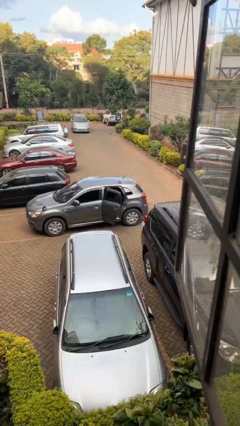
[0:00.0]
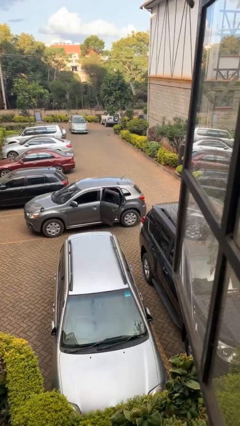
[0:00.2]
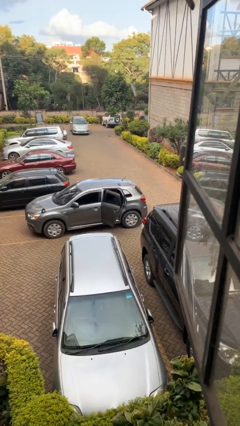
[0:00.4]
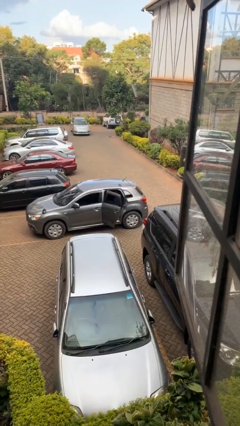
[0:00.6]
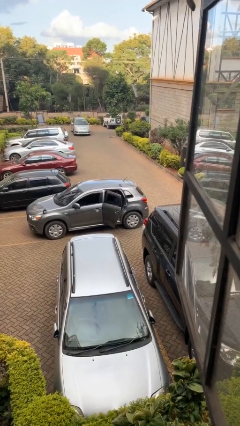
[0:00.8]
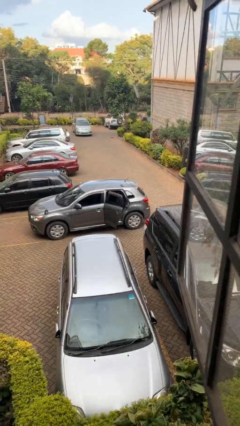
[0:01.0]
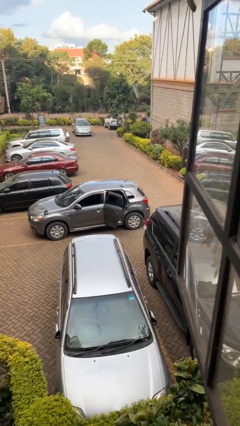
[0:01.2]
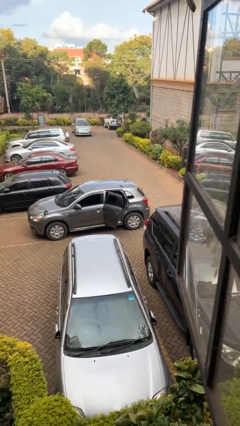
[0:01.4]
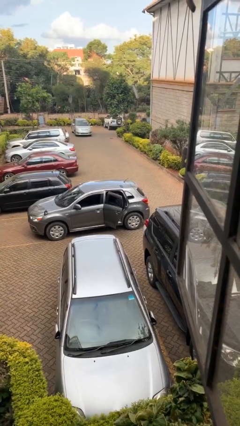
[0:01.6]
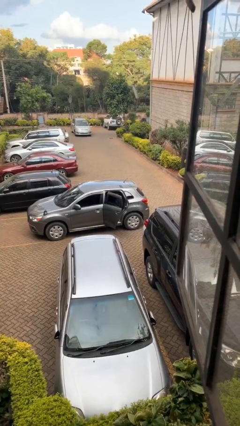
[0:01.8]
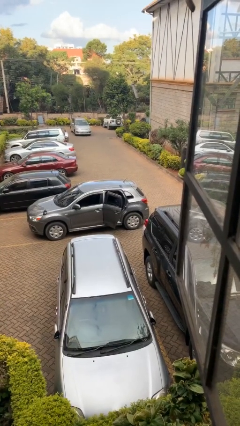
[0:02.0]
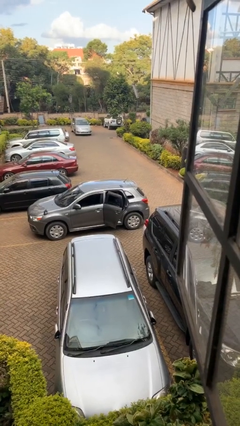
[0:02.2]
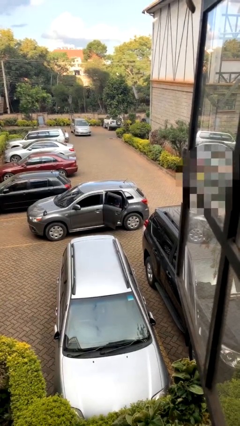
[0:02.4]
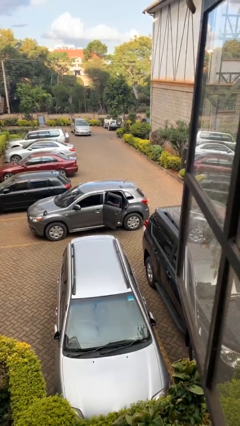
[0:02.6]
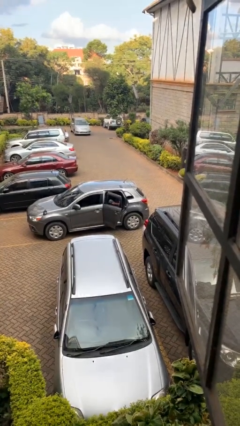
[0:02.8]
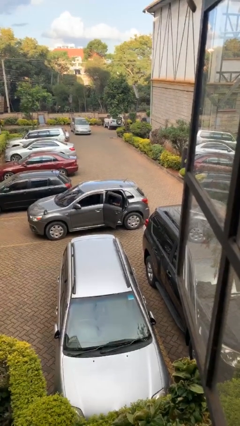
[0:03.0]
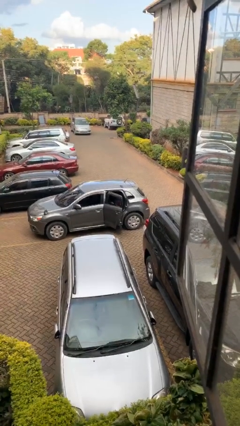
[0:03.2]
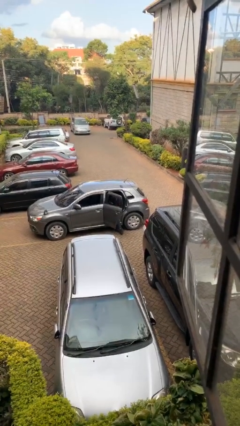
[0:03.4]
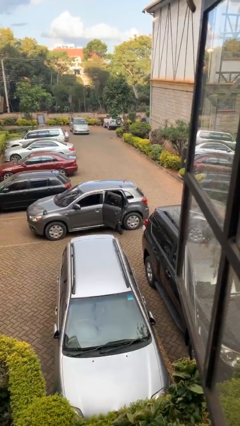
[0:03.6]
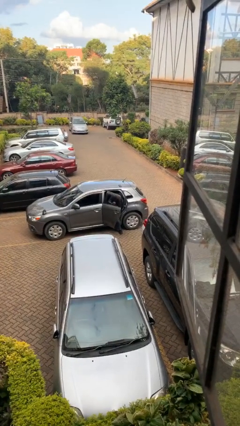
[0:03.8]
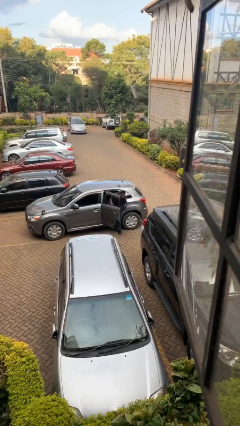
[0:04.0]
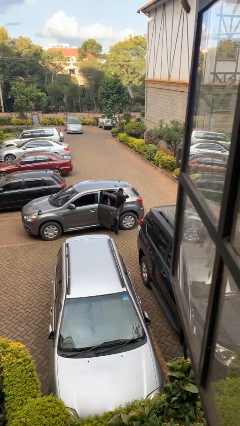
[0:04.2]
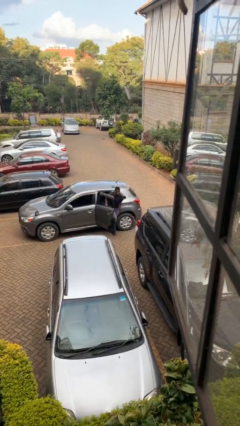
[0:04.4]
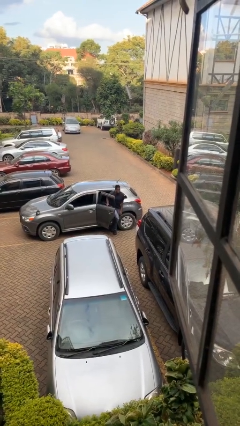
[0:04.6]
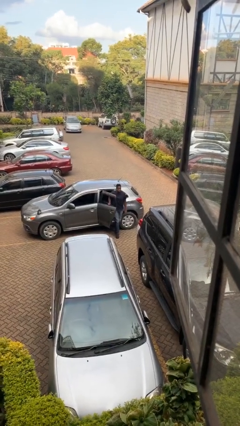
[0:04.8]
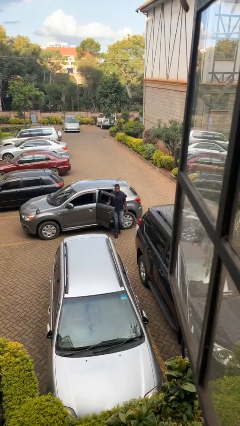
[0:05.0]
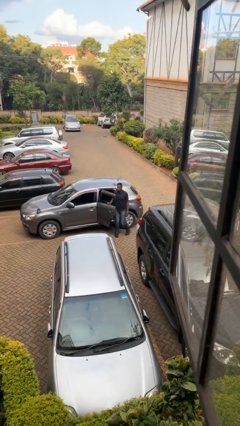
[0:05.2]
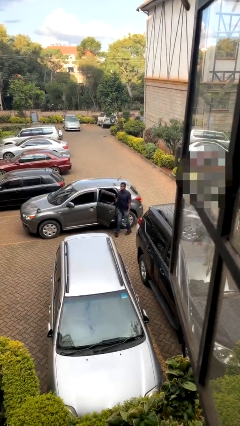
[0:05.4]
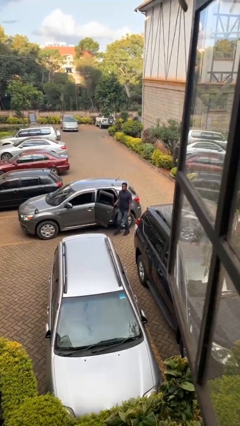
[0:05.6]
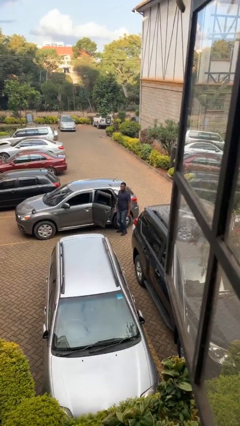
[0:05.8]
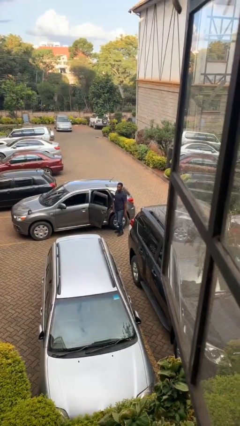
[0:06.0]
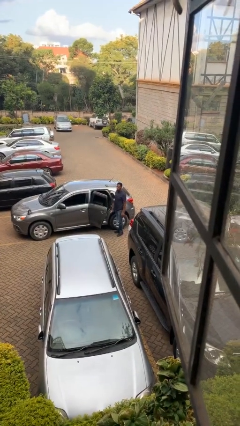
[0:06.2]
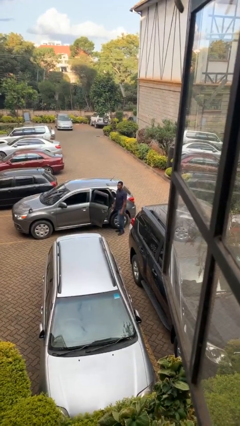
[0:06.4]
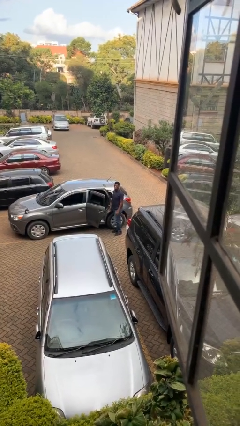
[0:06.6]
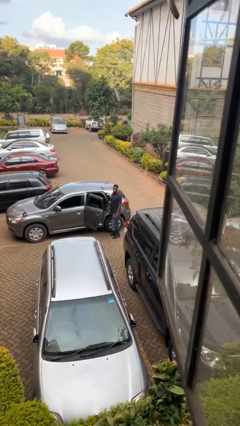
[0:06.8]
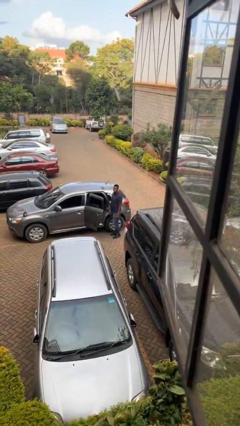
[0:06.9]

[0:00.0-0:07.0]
person exits car

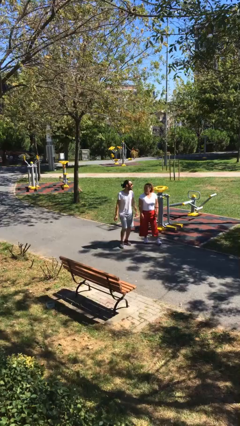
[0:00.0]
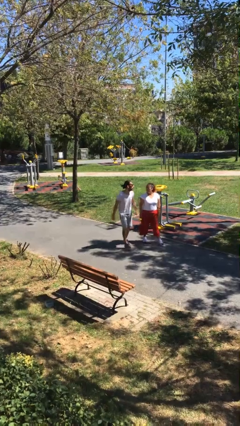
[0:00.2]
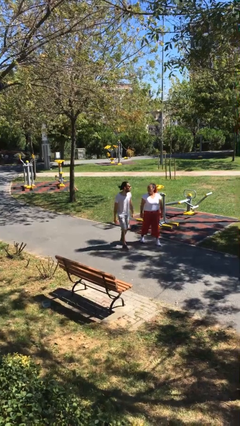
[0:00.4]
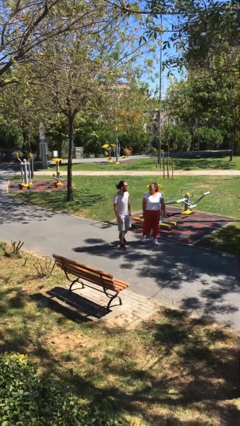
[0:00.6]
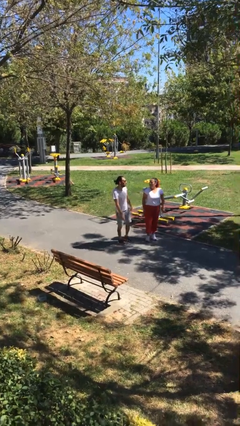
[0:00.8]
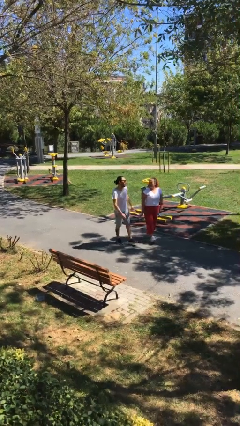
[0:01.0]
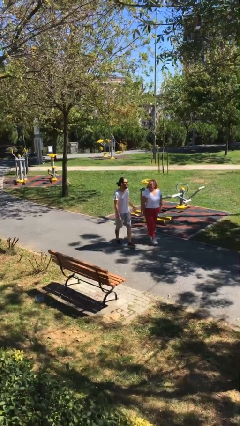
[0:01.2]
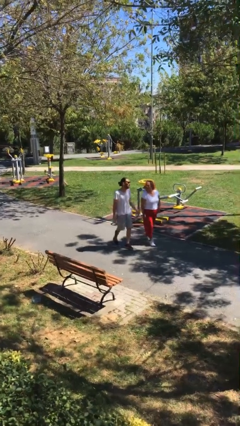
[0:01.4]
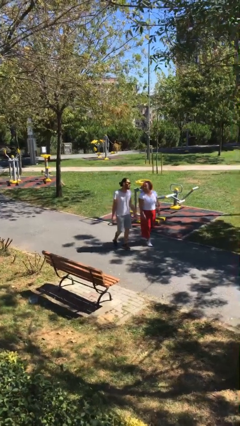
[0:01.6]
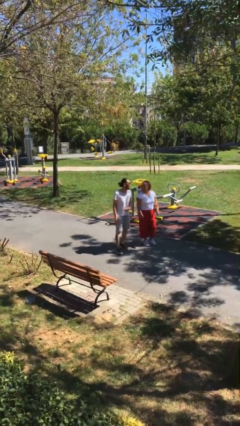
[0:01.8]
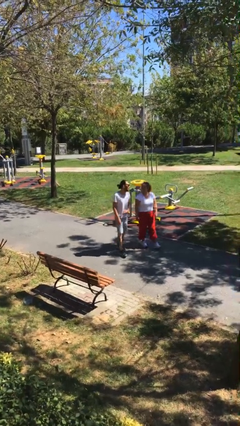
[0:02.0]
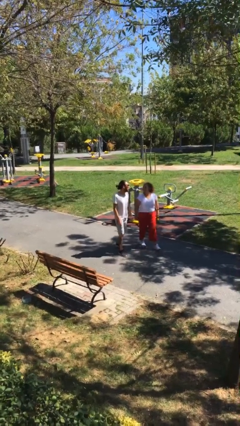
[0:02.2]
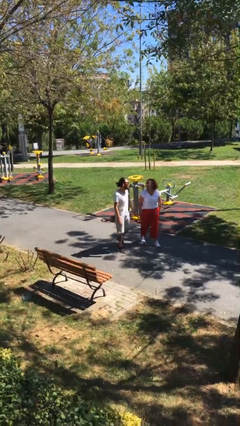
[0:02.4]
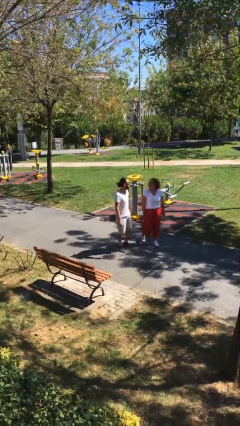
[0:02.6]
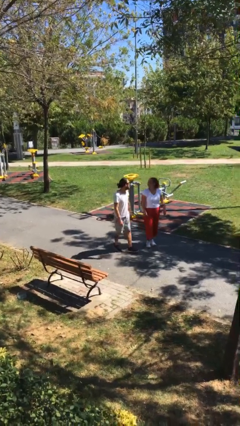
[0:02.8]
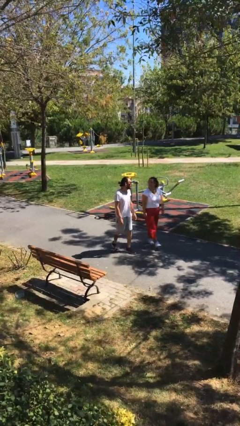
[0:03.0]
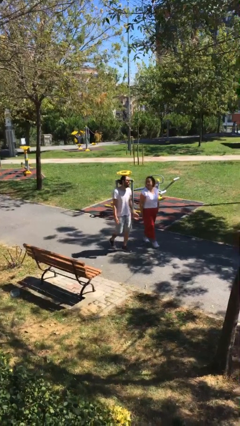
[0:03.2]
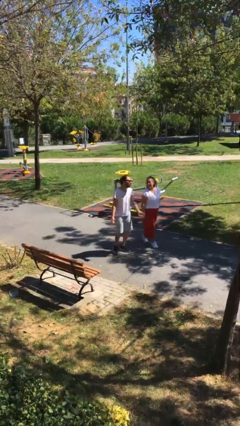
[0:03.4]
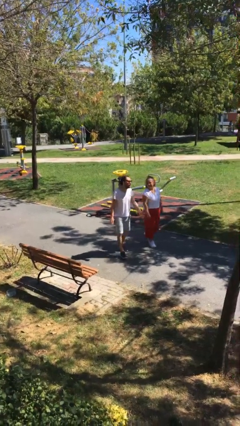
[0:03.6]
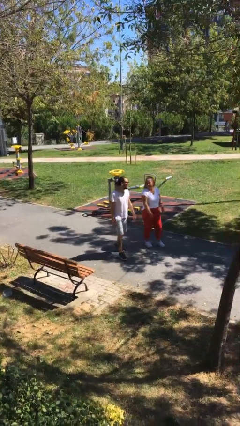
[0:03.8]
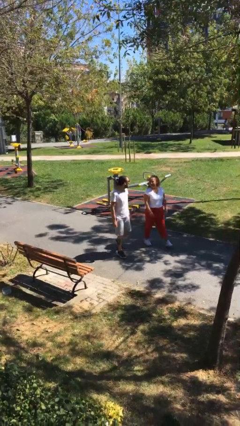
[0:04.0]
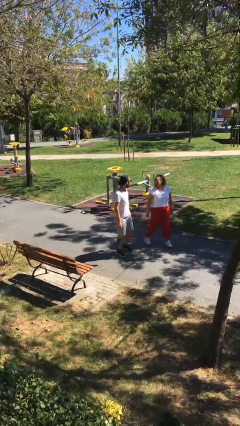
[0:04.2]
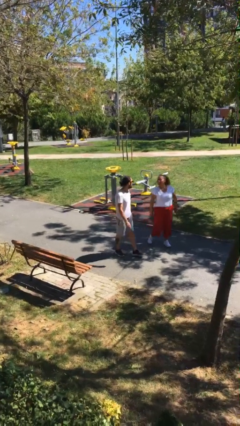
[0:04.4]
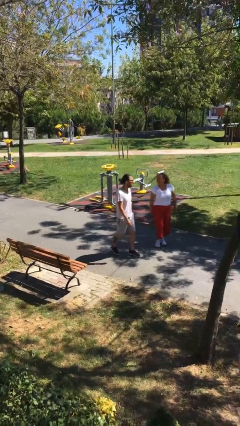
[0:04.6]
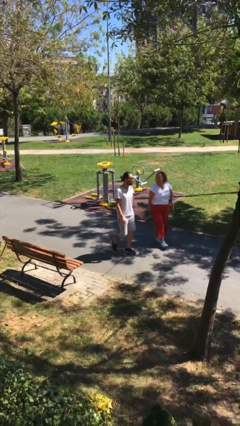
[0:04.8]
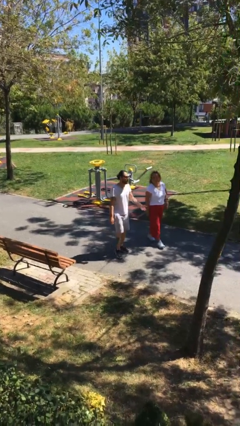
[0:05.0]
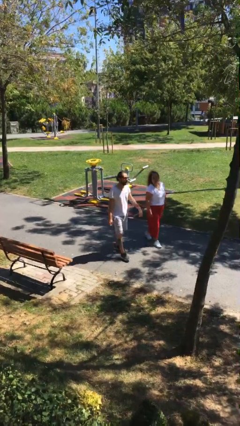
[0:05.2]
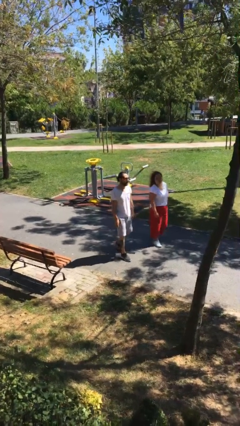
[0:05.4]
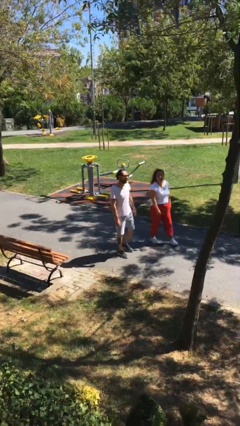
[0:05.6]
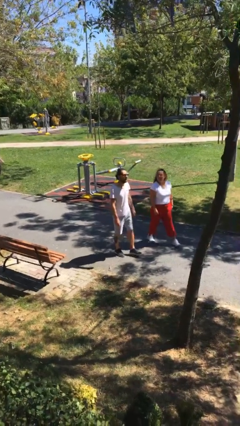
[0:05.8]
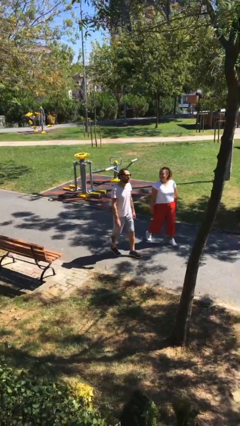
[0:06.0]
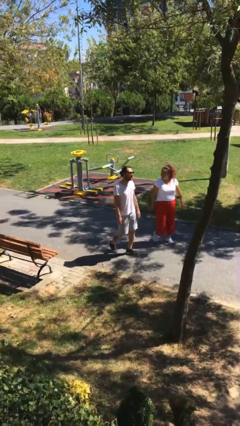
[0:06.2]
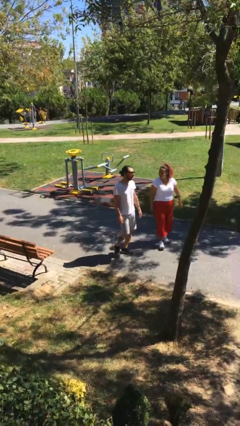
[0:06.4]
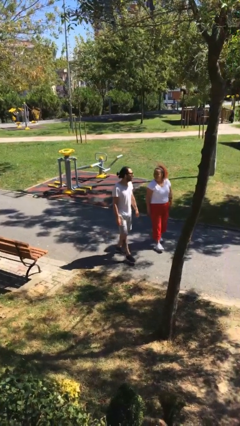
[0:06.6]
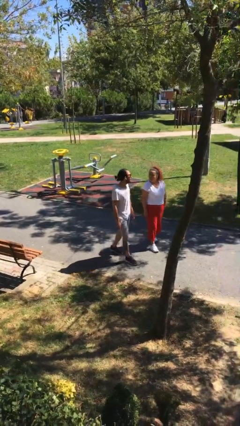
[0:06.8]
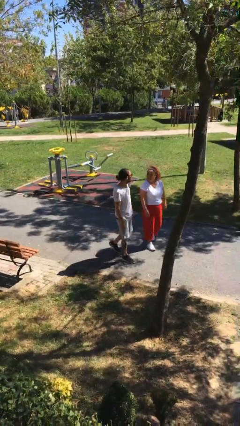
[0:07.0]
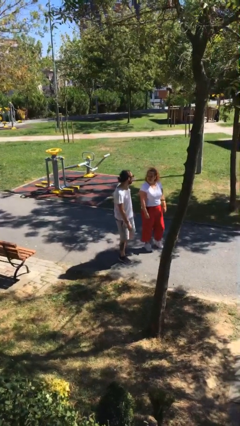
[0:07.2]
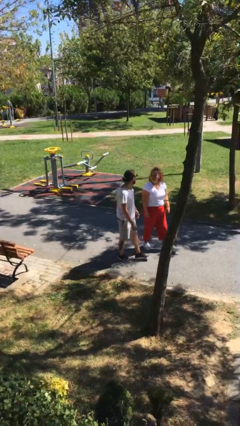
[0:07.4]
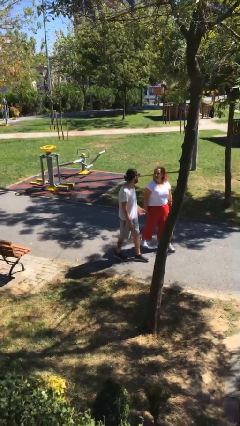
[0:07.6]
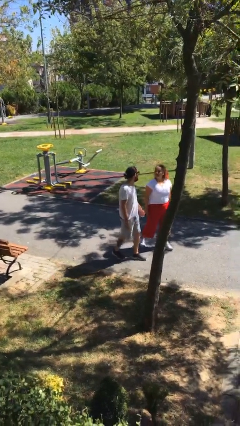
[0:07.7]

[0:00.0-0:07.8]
person talks to person

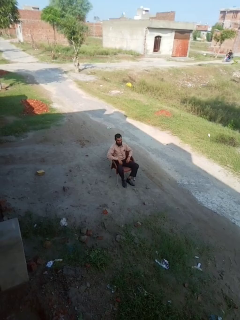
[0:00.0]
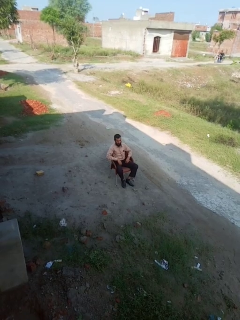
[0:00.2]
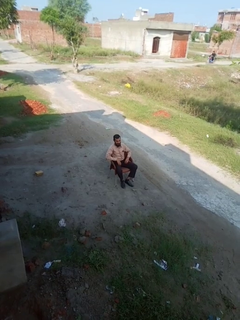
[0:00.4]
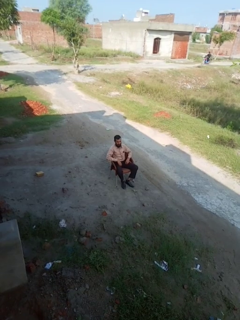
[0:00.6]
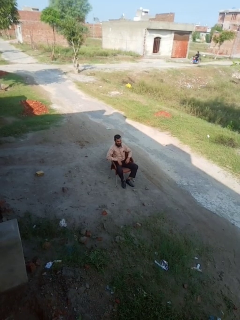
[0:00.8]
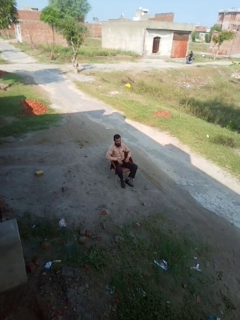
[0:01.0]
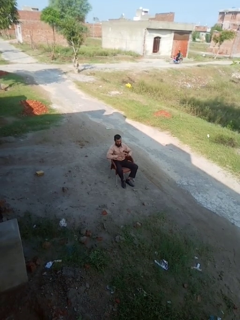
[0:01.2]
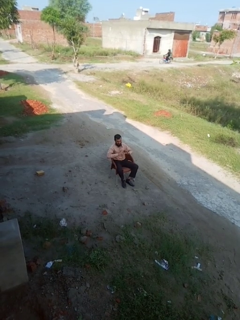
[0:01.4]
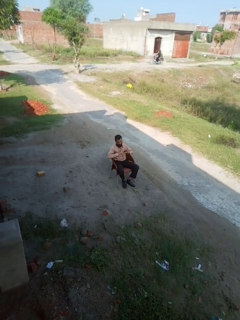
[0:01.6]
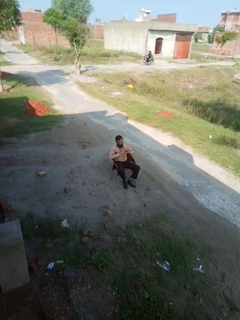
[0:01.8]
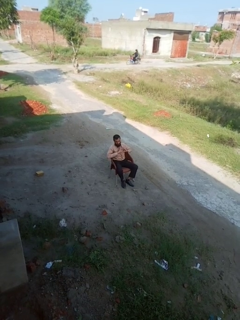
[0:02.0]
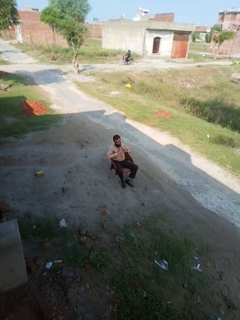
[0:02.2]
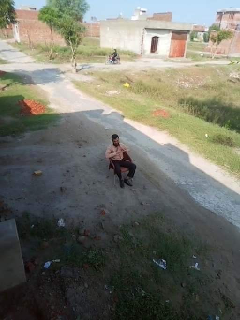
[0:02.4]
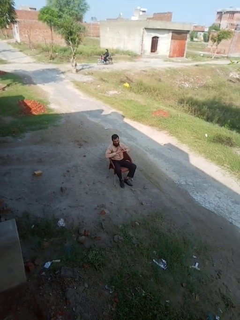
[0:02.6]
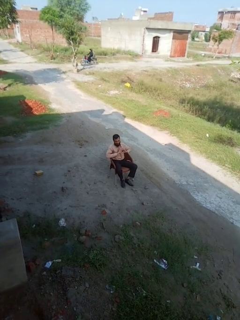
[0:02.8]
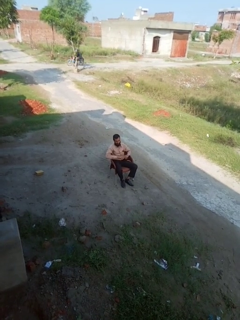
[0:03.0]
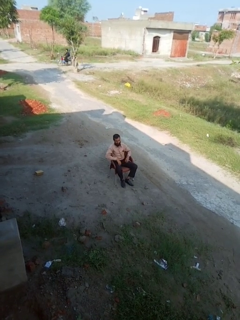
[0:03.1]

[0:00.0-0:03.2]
person gestures heart

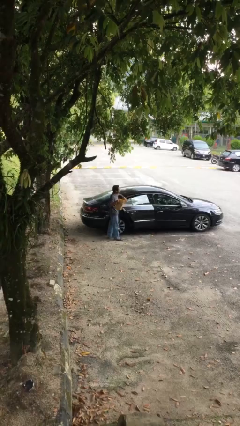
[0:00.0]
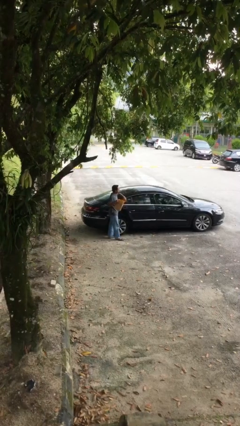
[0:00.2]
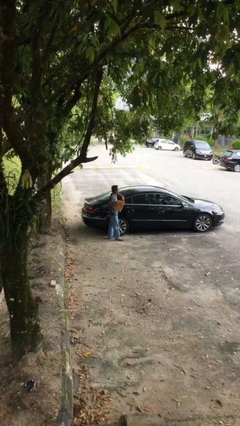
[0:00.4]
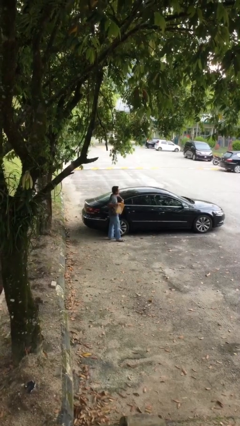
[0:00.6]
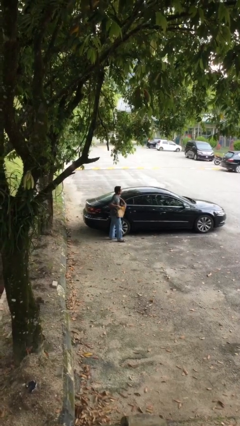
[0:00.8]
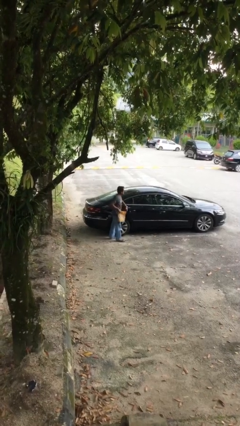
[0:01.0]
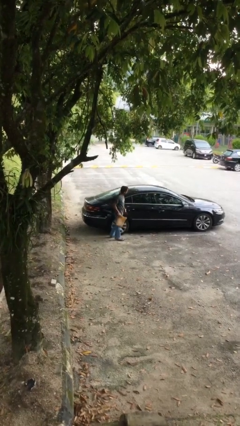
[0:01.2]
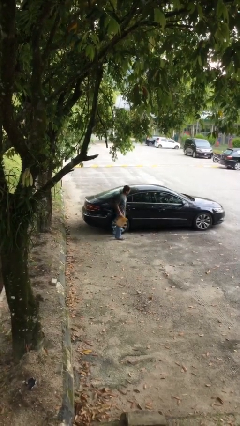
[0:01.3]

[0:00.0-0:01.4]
person closes car door
